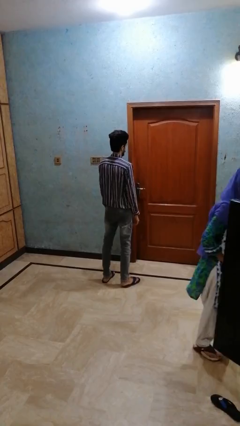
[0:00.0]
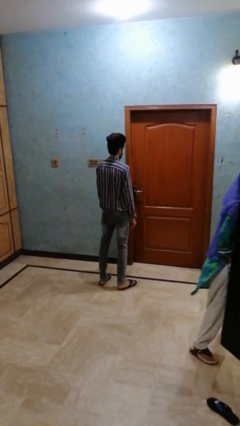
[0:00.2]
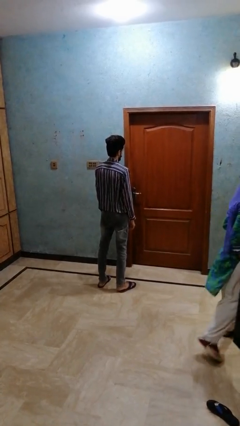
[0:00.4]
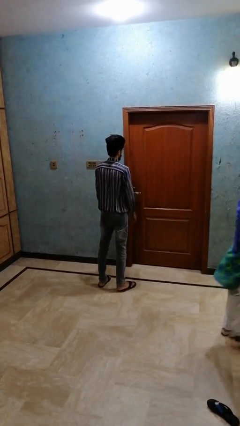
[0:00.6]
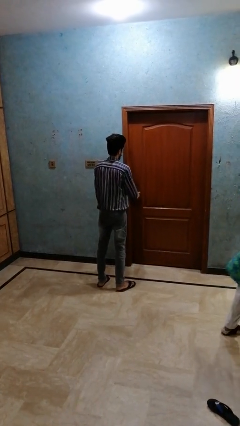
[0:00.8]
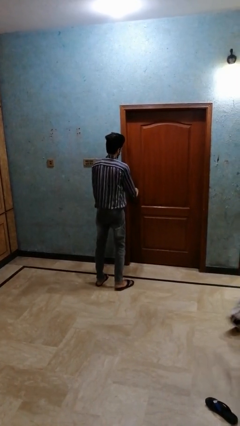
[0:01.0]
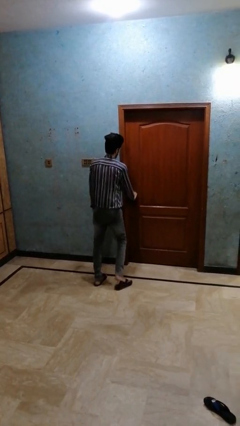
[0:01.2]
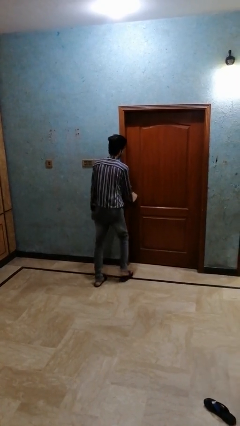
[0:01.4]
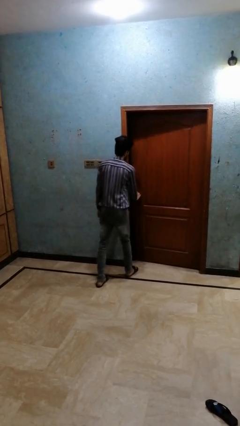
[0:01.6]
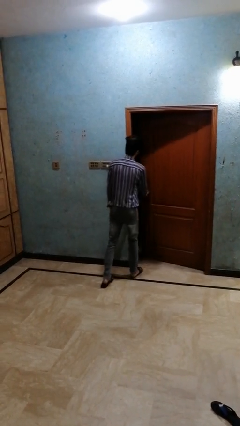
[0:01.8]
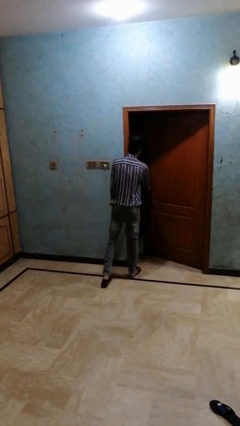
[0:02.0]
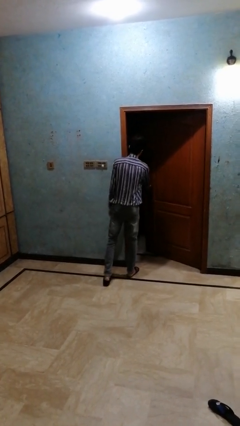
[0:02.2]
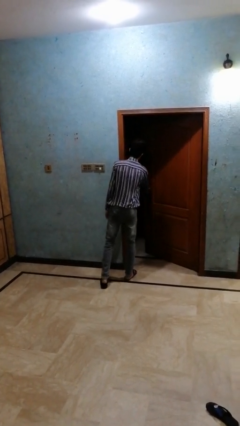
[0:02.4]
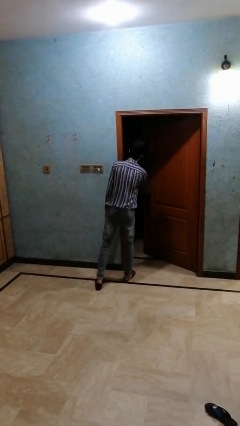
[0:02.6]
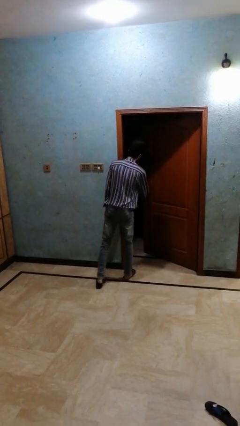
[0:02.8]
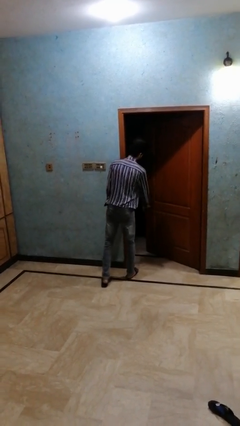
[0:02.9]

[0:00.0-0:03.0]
person opens closet door

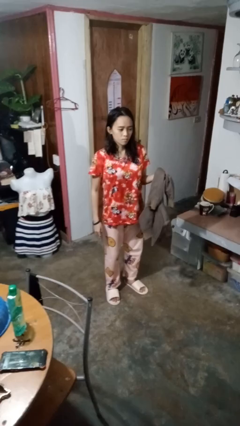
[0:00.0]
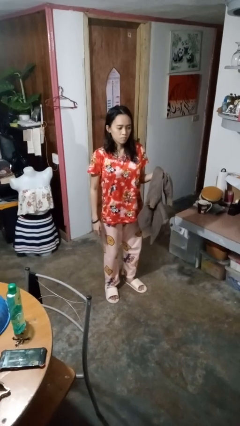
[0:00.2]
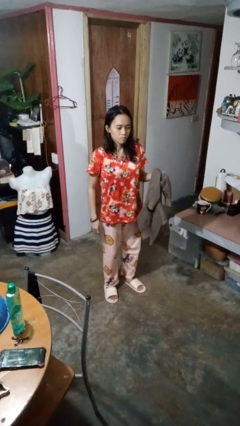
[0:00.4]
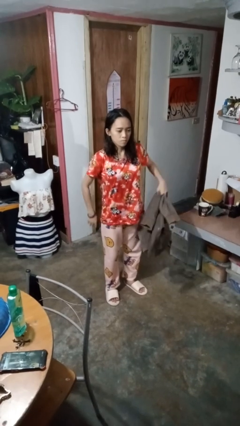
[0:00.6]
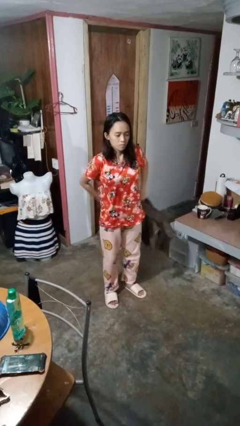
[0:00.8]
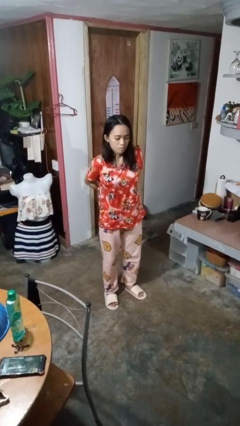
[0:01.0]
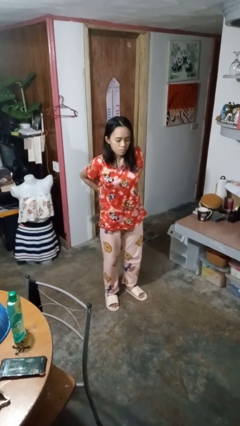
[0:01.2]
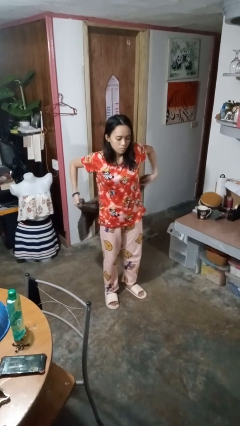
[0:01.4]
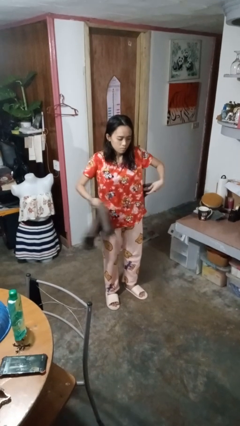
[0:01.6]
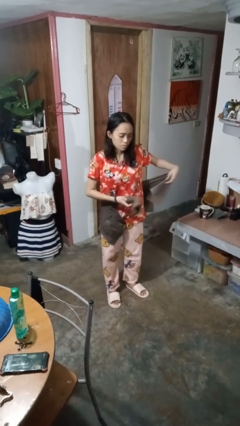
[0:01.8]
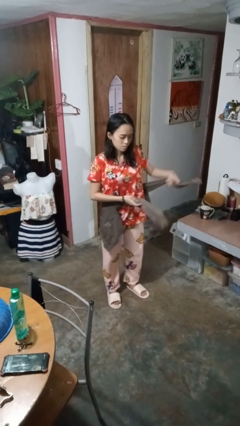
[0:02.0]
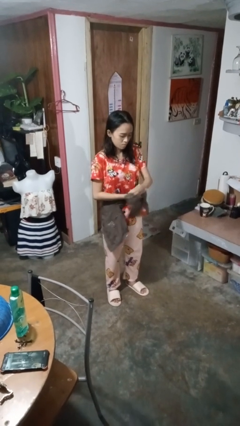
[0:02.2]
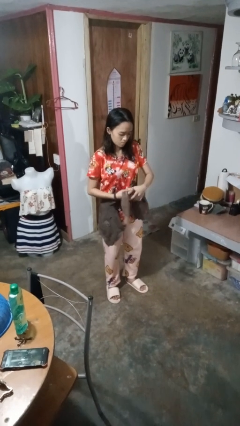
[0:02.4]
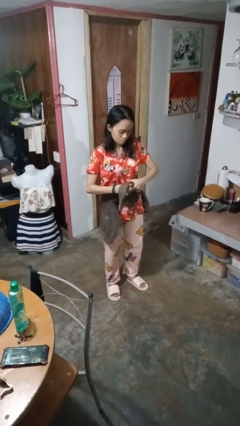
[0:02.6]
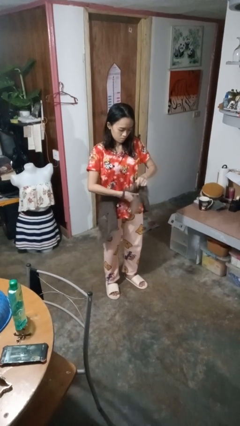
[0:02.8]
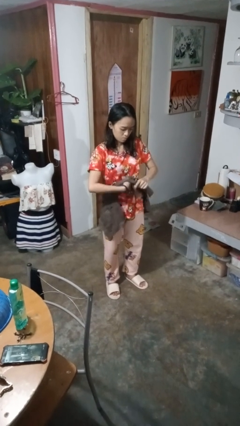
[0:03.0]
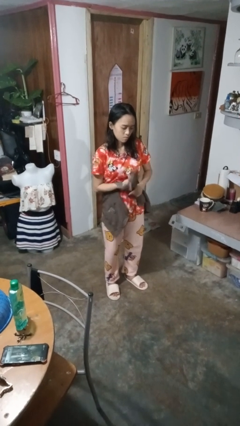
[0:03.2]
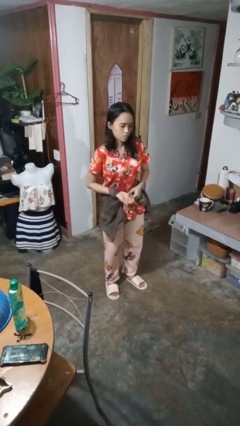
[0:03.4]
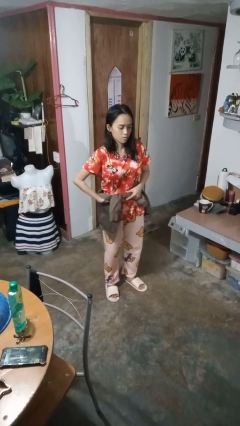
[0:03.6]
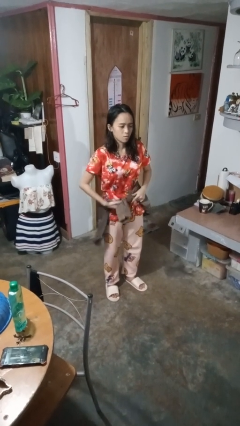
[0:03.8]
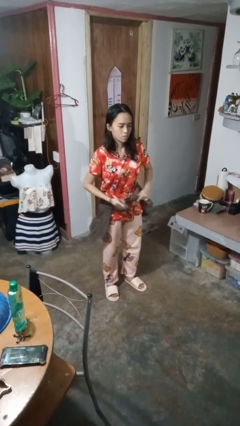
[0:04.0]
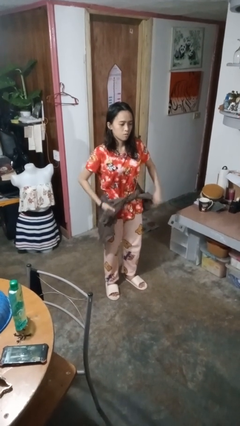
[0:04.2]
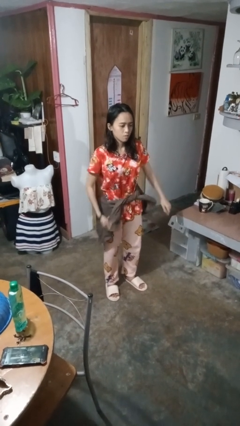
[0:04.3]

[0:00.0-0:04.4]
person ties jacket around waist

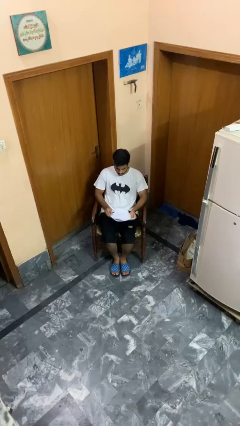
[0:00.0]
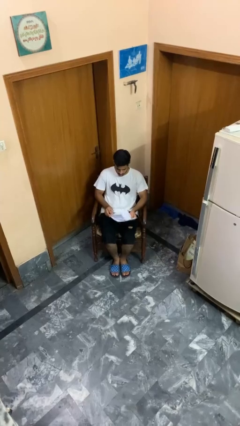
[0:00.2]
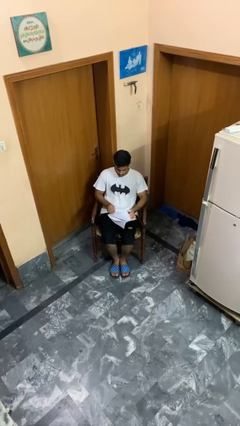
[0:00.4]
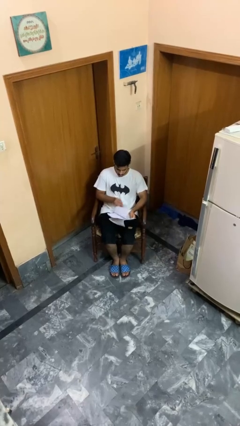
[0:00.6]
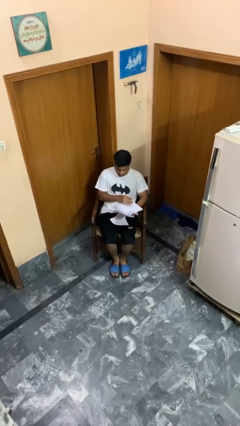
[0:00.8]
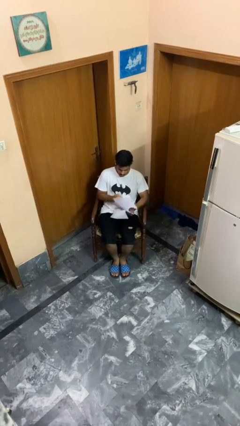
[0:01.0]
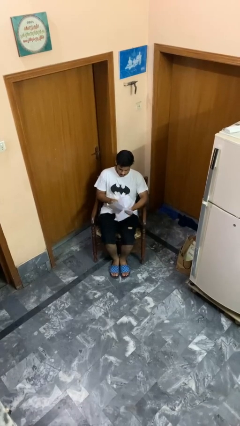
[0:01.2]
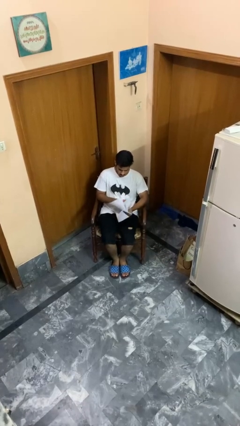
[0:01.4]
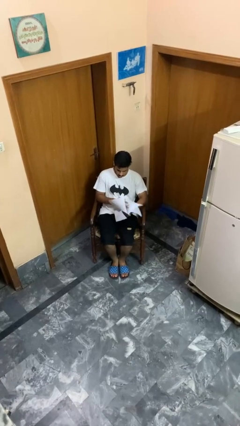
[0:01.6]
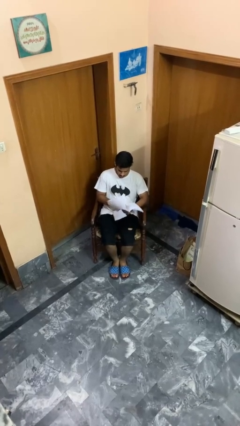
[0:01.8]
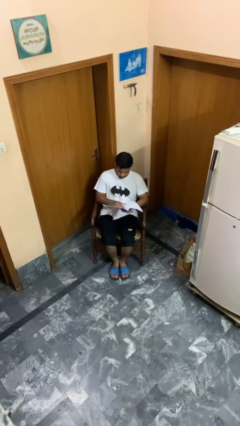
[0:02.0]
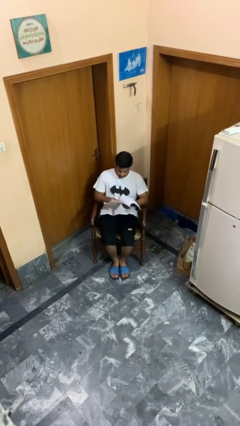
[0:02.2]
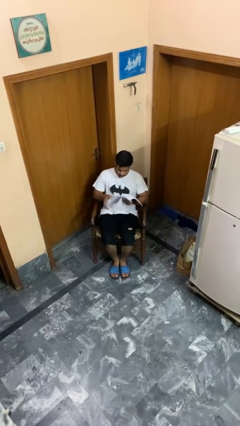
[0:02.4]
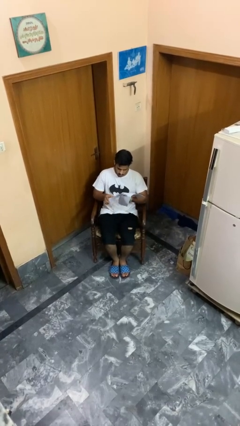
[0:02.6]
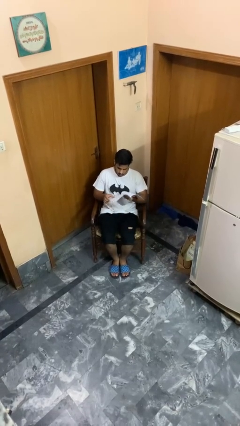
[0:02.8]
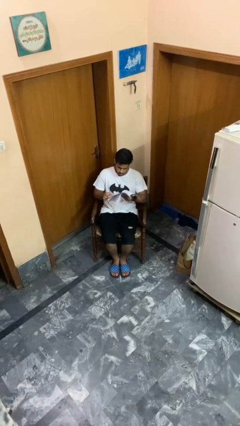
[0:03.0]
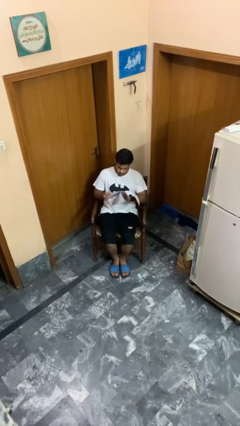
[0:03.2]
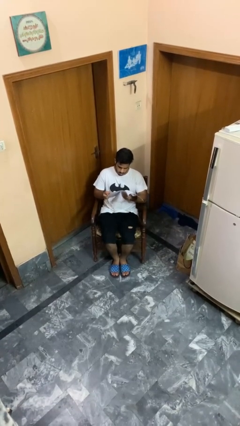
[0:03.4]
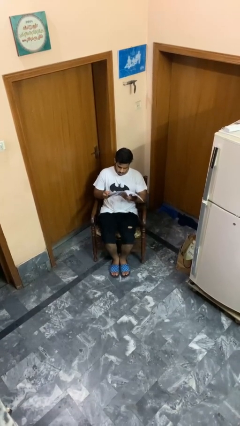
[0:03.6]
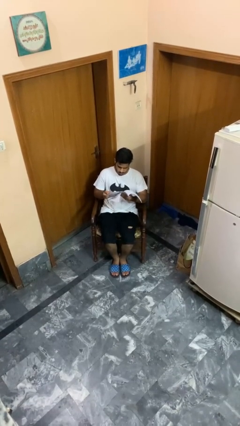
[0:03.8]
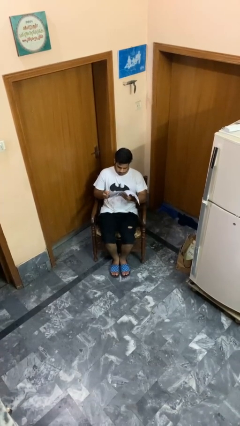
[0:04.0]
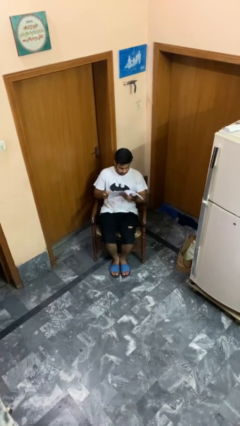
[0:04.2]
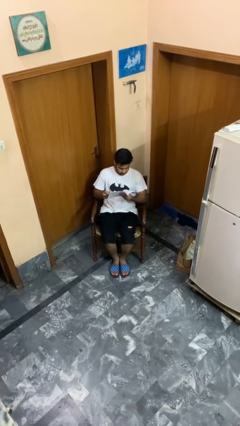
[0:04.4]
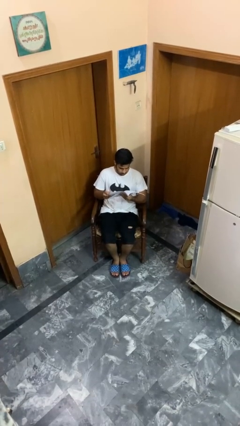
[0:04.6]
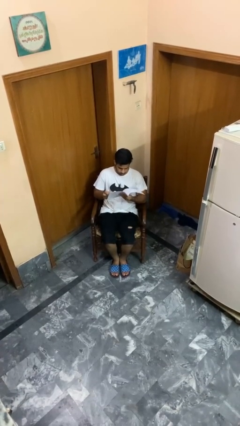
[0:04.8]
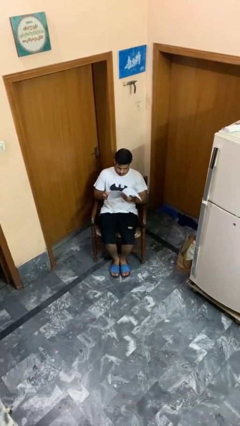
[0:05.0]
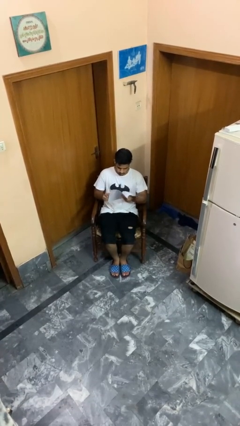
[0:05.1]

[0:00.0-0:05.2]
person reads magazine

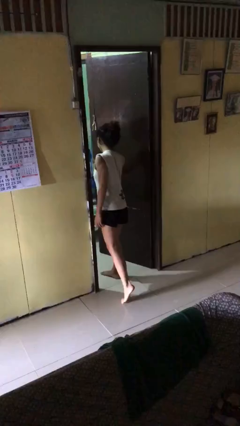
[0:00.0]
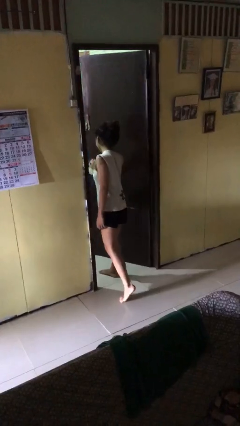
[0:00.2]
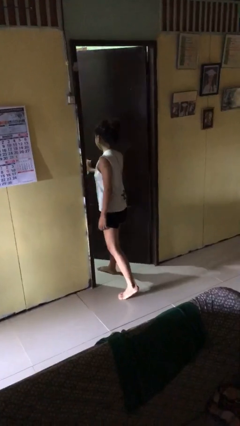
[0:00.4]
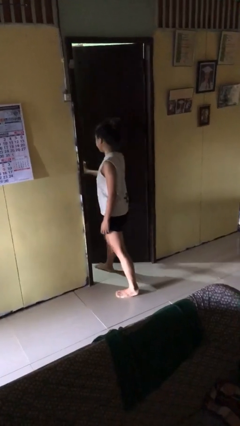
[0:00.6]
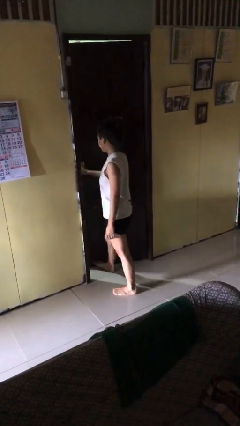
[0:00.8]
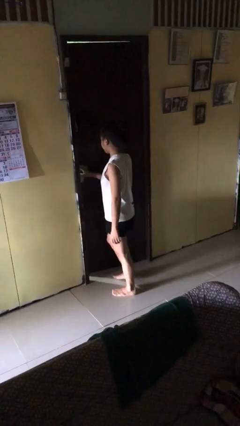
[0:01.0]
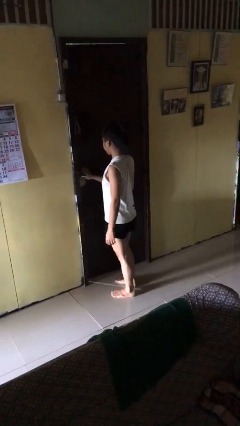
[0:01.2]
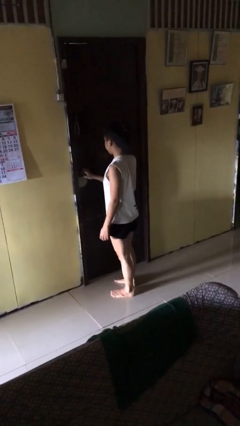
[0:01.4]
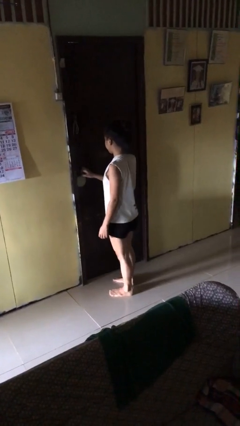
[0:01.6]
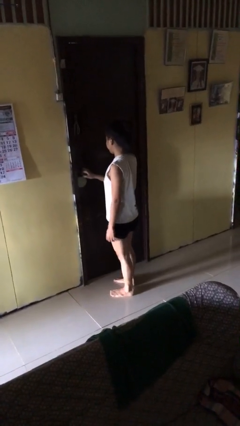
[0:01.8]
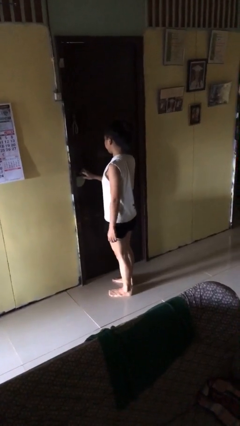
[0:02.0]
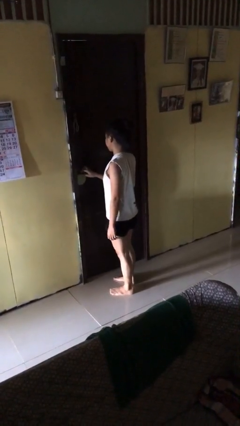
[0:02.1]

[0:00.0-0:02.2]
person closes facility door

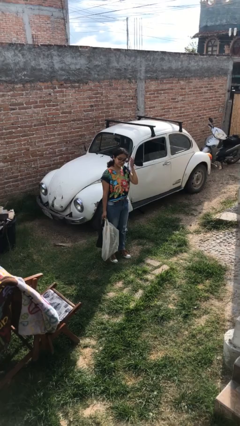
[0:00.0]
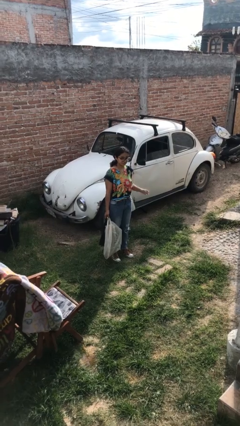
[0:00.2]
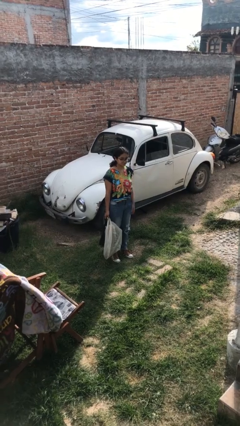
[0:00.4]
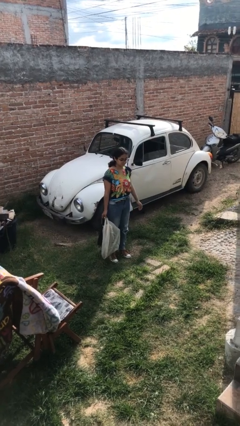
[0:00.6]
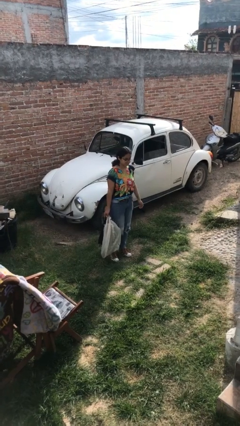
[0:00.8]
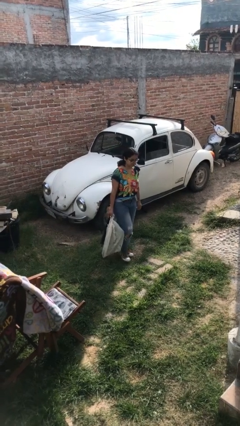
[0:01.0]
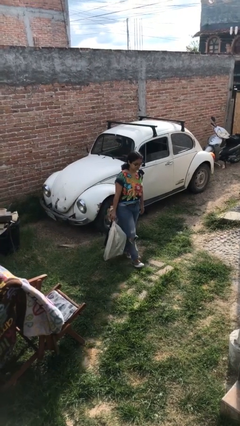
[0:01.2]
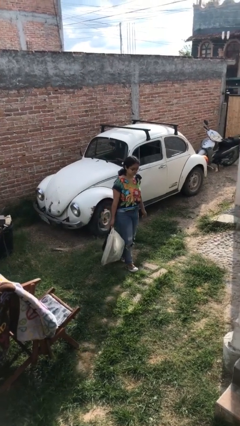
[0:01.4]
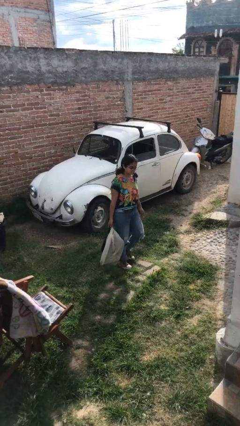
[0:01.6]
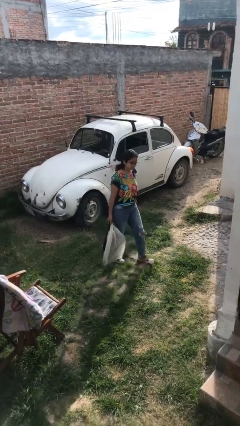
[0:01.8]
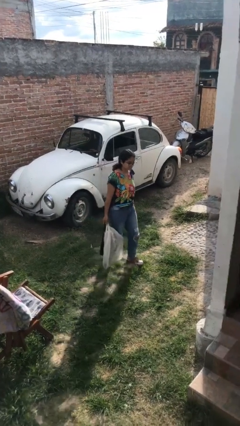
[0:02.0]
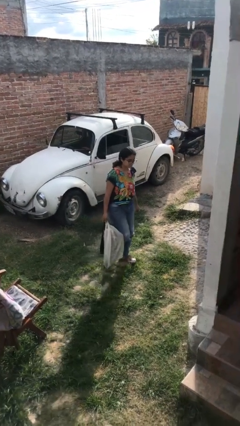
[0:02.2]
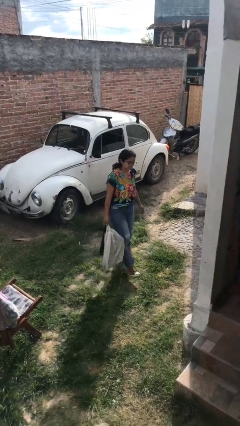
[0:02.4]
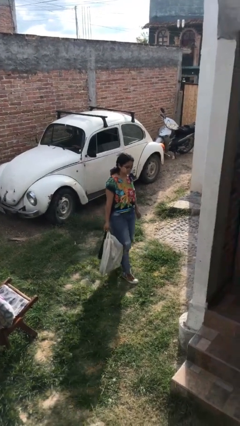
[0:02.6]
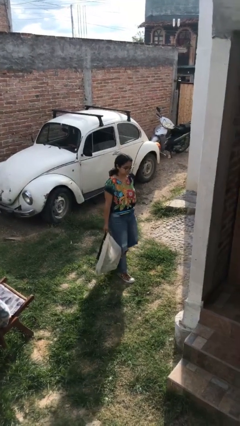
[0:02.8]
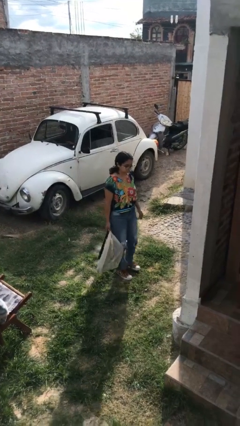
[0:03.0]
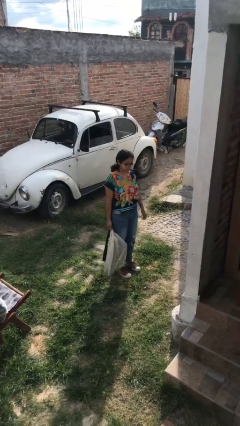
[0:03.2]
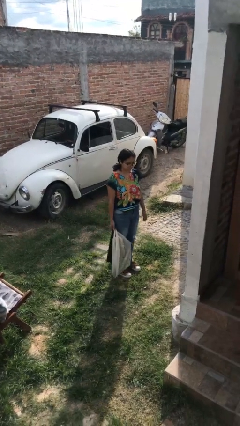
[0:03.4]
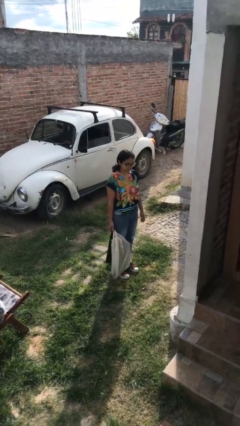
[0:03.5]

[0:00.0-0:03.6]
person carries groceries
